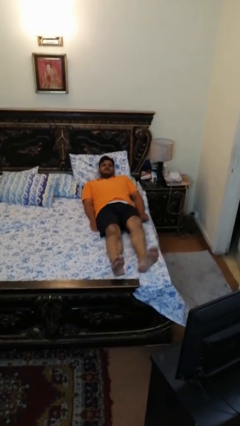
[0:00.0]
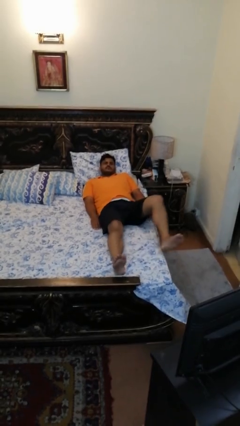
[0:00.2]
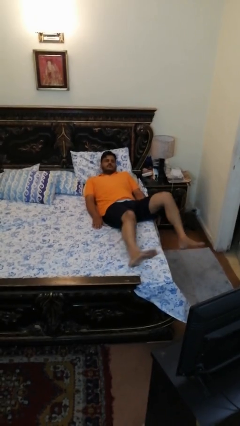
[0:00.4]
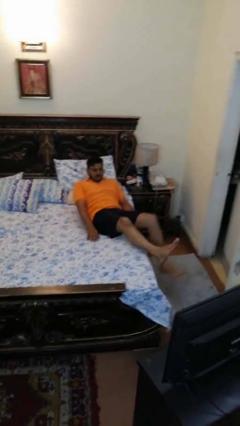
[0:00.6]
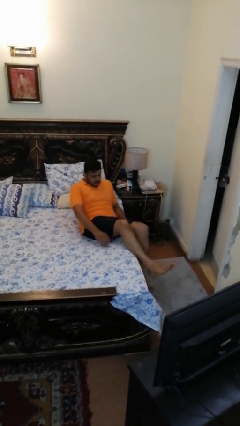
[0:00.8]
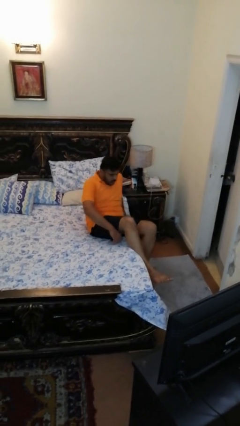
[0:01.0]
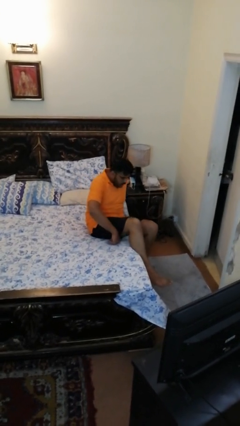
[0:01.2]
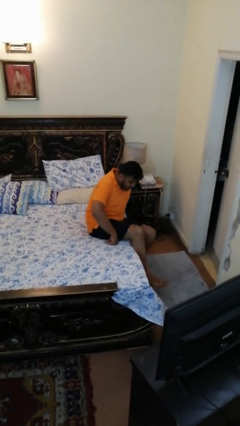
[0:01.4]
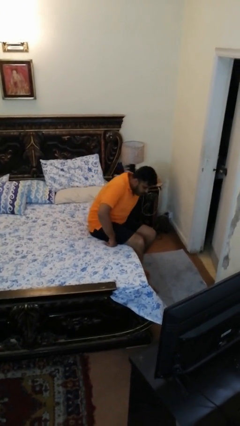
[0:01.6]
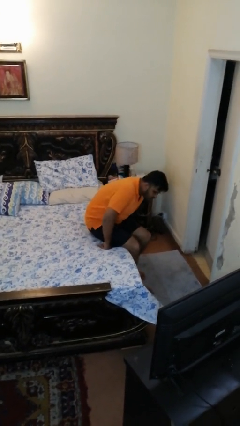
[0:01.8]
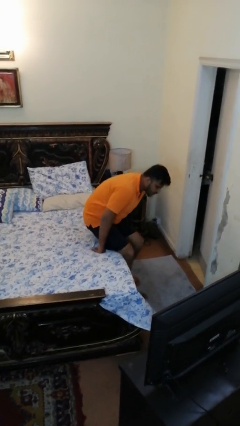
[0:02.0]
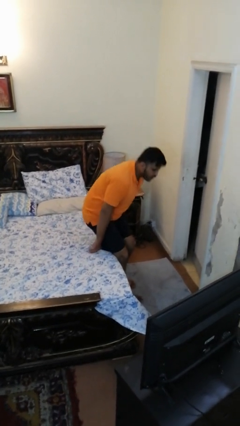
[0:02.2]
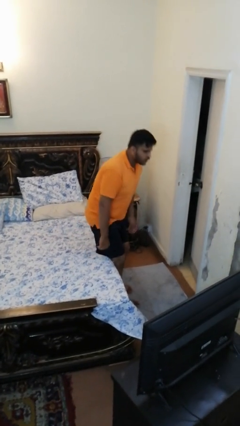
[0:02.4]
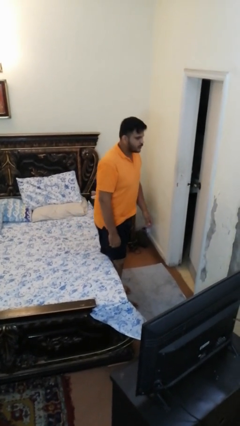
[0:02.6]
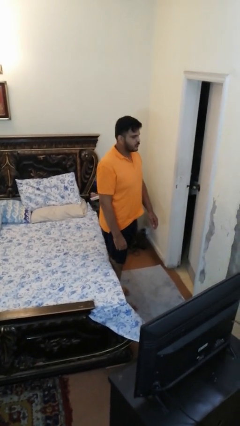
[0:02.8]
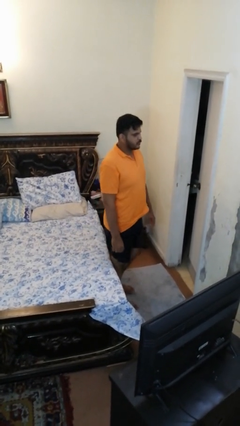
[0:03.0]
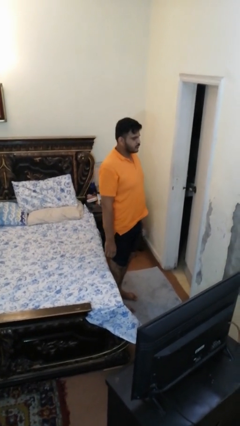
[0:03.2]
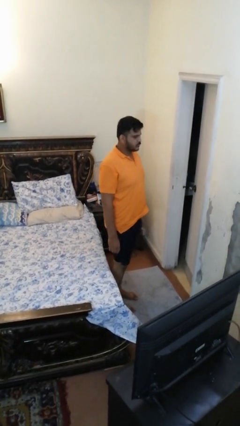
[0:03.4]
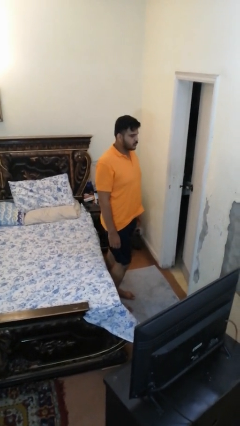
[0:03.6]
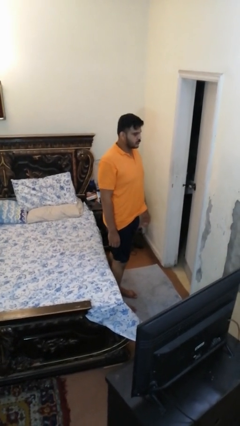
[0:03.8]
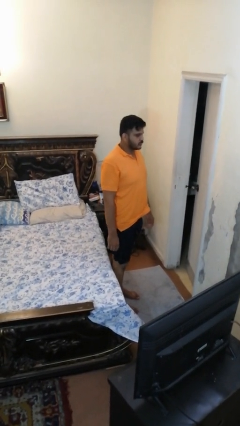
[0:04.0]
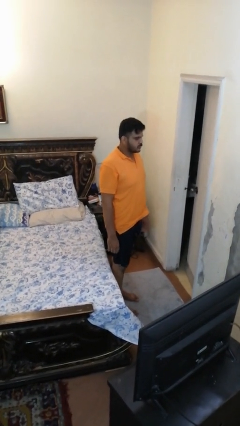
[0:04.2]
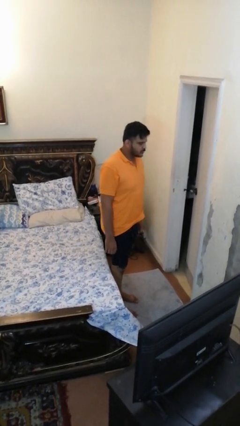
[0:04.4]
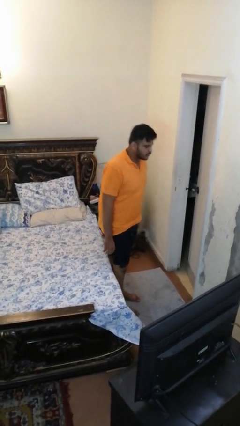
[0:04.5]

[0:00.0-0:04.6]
person stands up

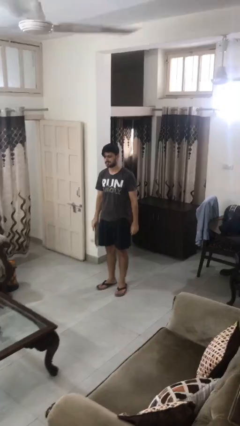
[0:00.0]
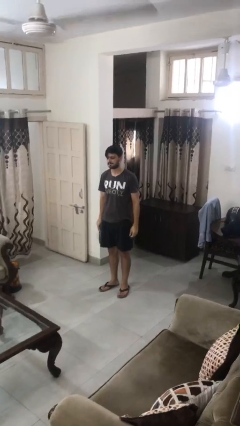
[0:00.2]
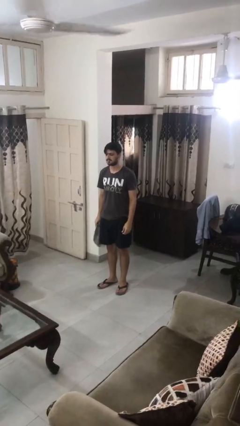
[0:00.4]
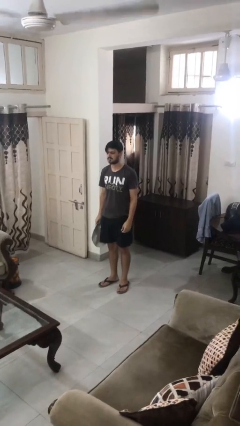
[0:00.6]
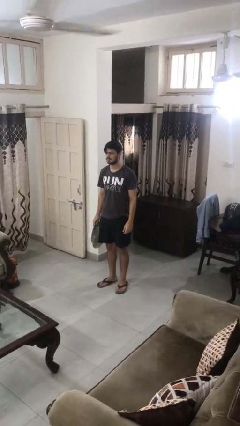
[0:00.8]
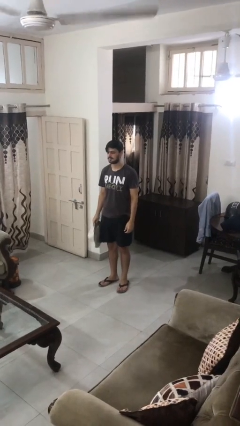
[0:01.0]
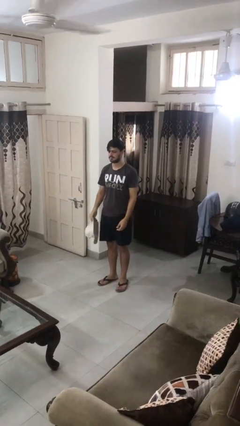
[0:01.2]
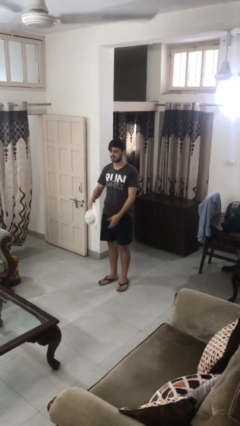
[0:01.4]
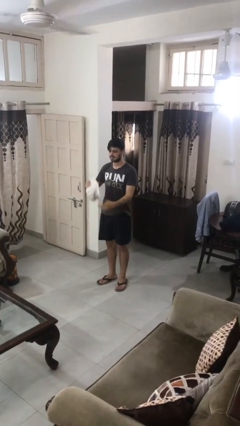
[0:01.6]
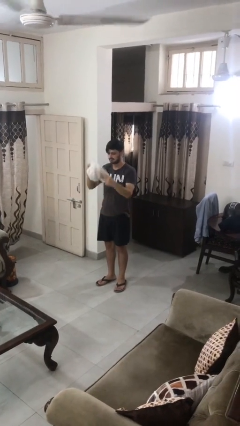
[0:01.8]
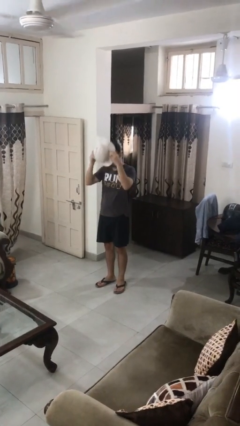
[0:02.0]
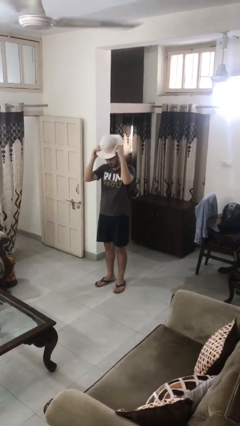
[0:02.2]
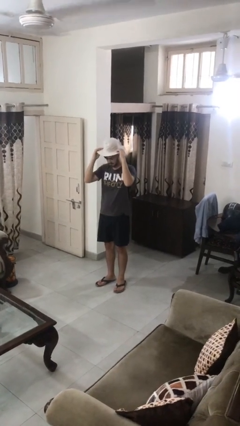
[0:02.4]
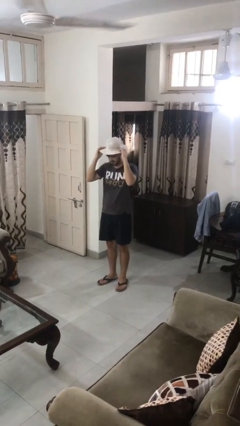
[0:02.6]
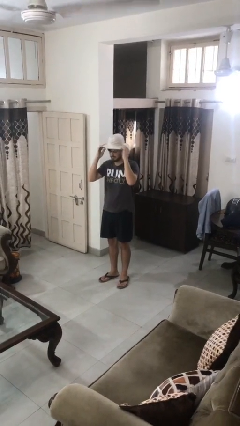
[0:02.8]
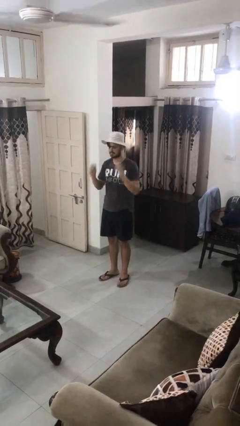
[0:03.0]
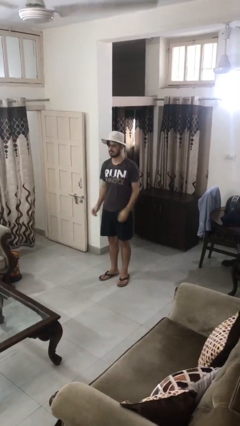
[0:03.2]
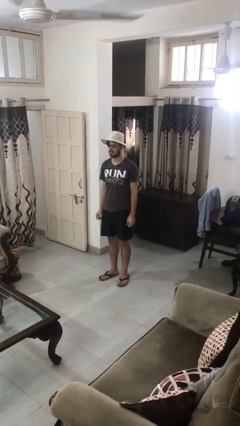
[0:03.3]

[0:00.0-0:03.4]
person puts on hat

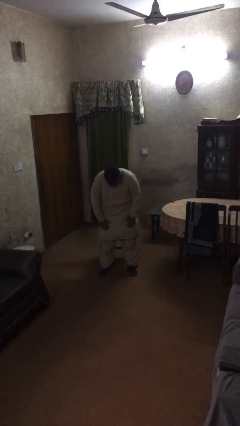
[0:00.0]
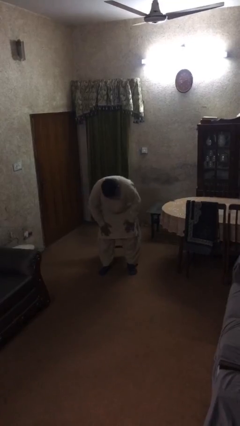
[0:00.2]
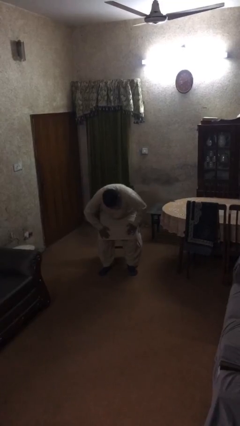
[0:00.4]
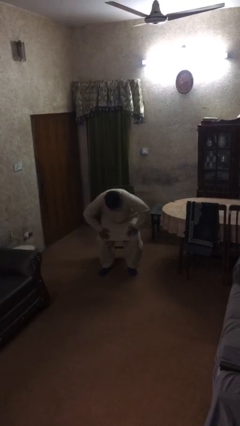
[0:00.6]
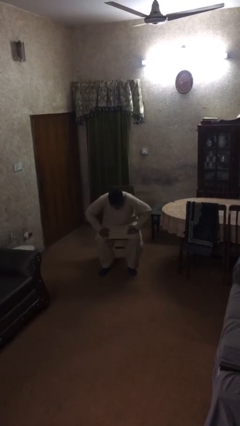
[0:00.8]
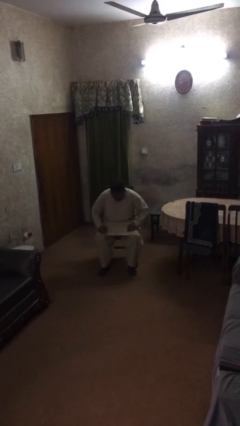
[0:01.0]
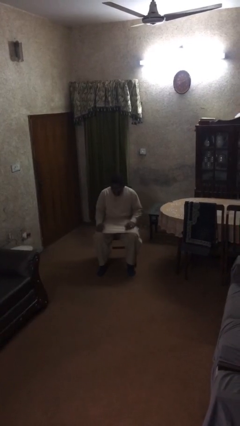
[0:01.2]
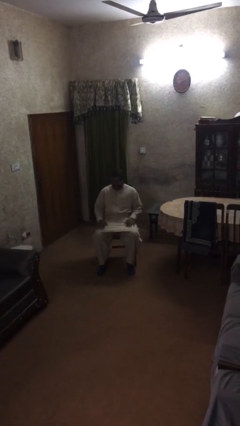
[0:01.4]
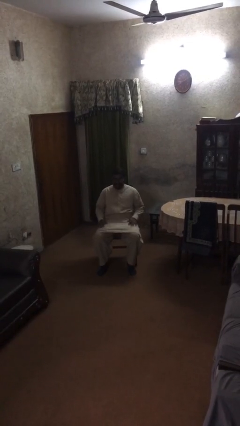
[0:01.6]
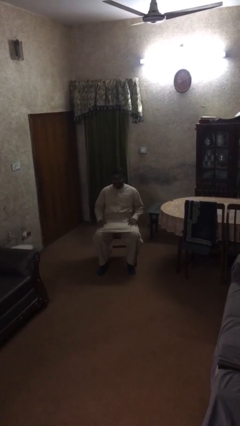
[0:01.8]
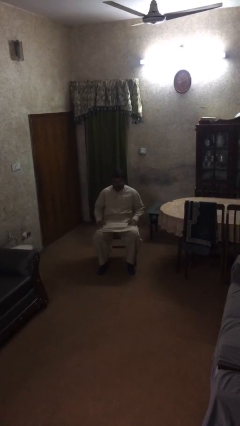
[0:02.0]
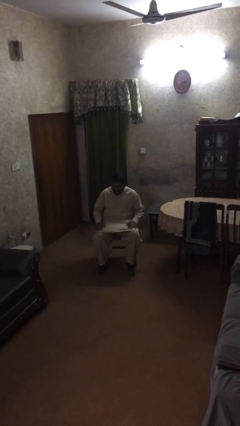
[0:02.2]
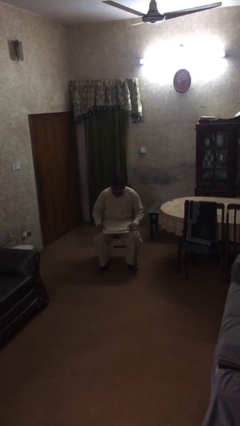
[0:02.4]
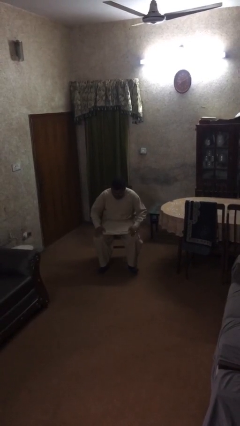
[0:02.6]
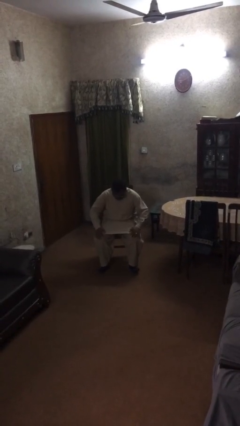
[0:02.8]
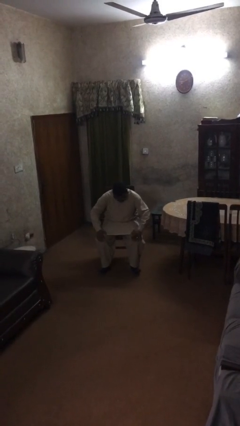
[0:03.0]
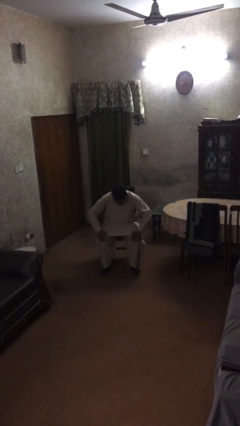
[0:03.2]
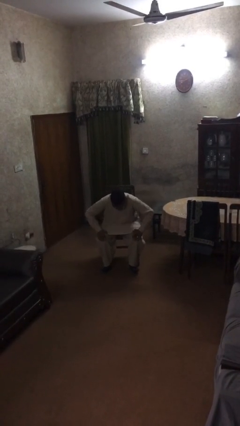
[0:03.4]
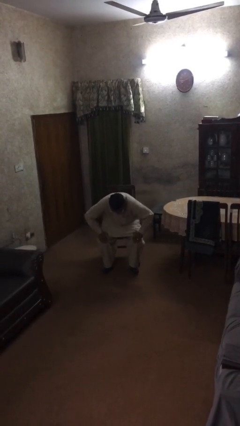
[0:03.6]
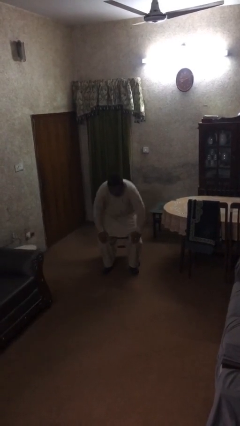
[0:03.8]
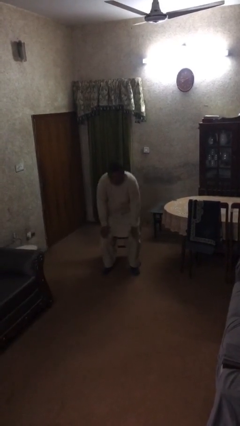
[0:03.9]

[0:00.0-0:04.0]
person sits down

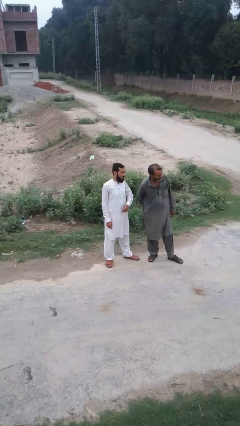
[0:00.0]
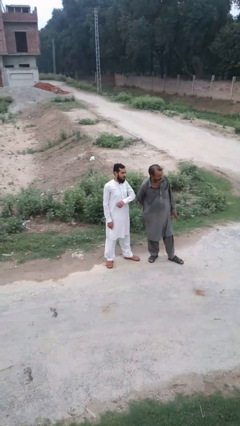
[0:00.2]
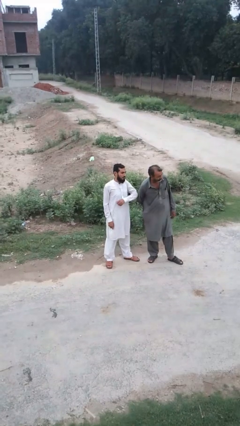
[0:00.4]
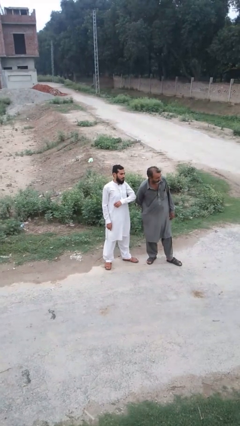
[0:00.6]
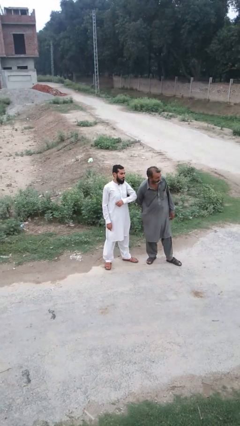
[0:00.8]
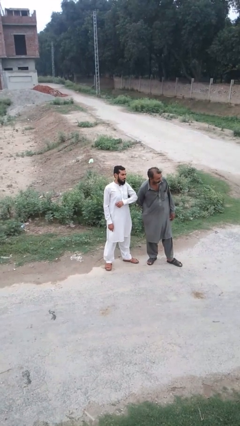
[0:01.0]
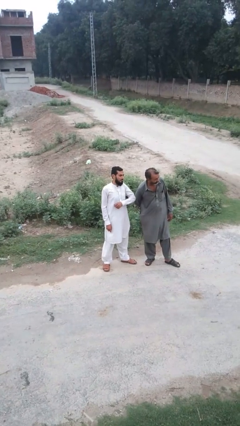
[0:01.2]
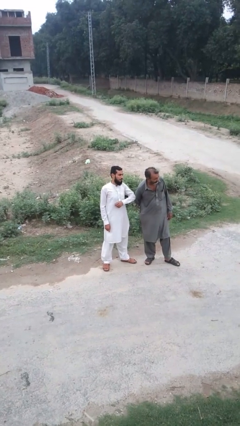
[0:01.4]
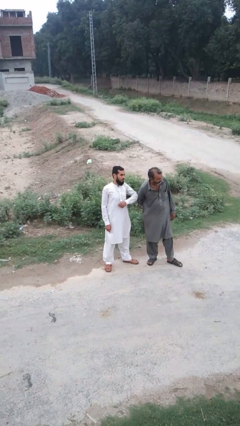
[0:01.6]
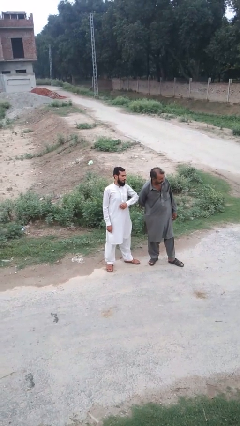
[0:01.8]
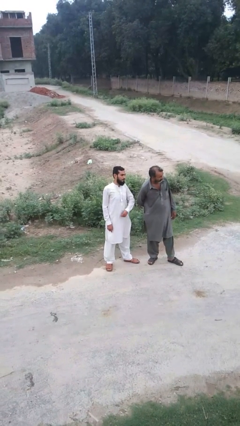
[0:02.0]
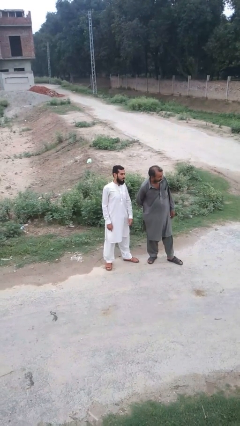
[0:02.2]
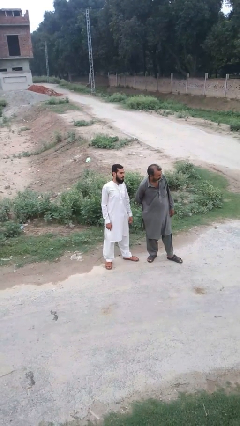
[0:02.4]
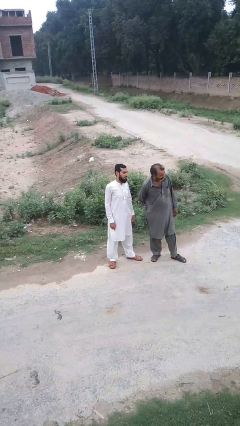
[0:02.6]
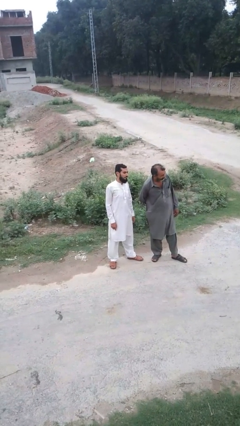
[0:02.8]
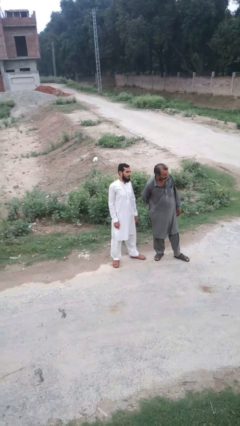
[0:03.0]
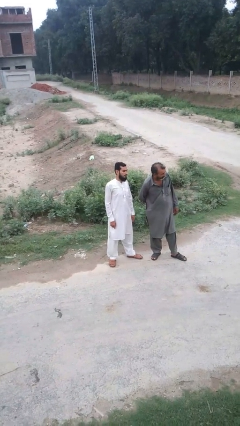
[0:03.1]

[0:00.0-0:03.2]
person nudges person with elbow

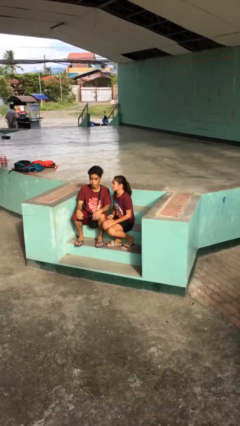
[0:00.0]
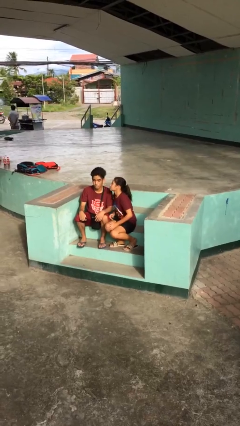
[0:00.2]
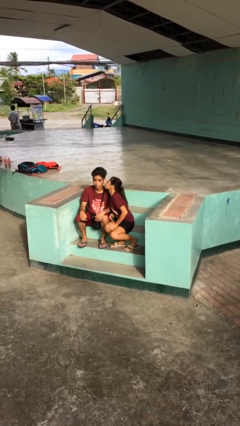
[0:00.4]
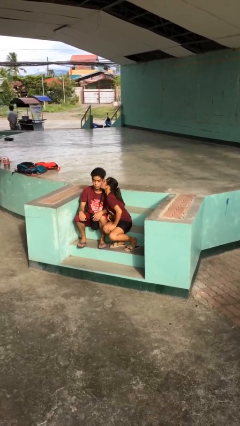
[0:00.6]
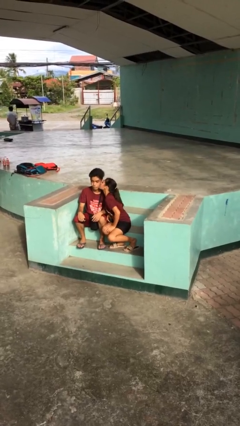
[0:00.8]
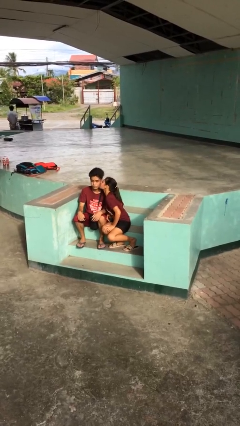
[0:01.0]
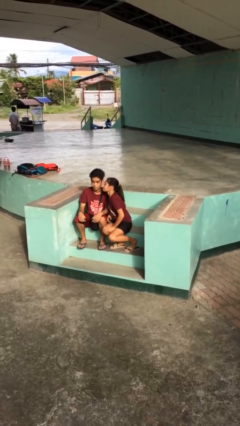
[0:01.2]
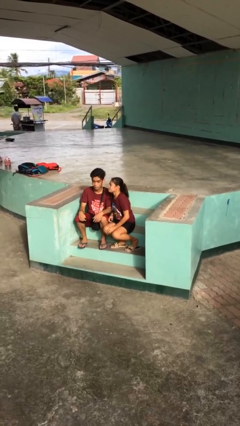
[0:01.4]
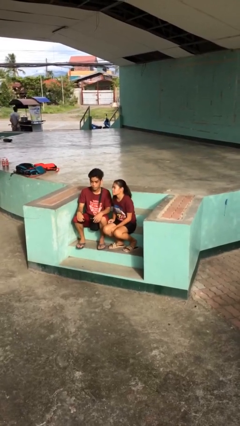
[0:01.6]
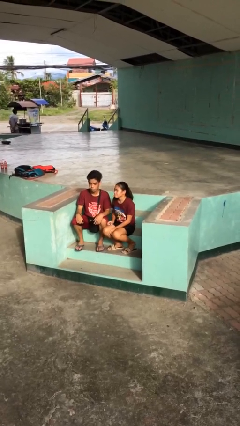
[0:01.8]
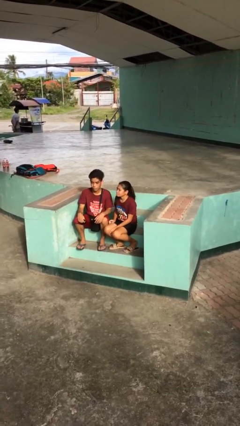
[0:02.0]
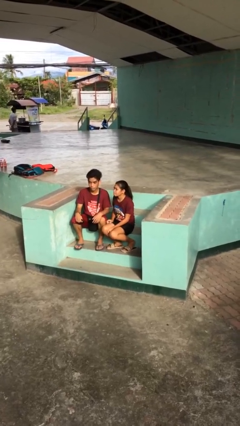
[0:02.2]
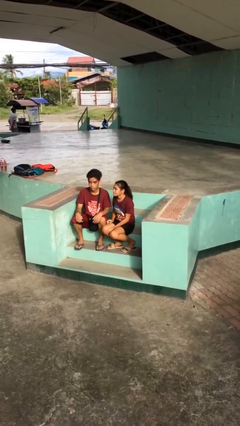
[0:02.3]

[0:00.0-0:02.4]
person kisses cheek of person
